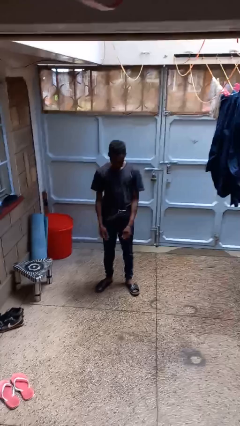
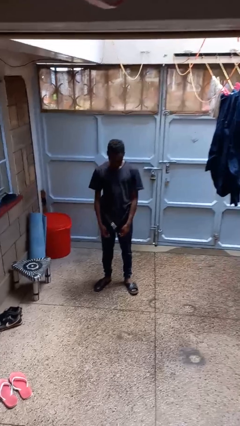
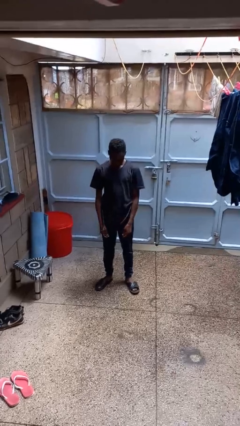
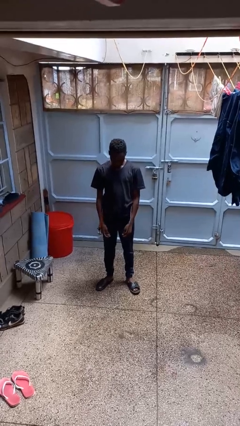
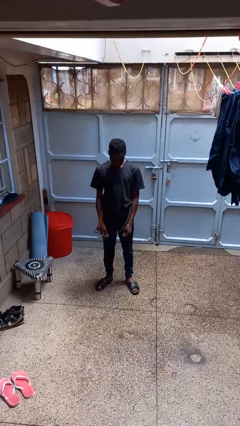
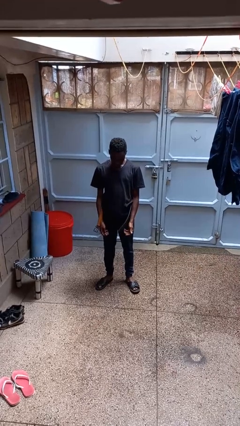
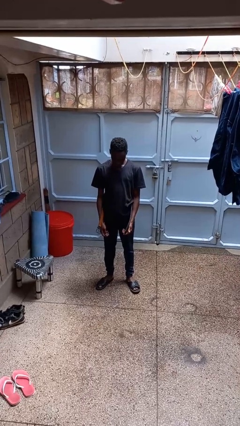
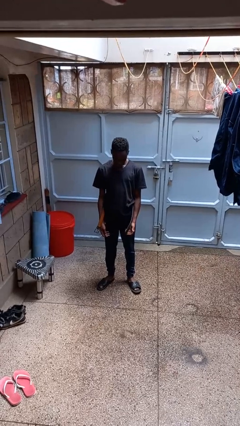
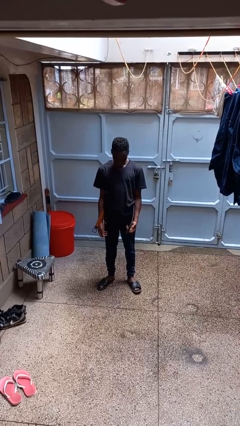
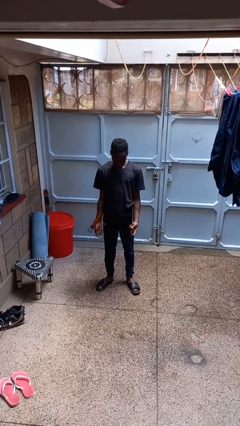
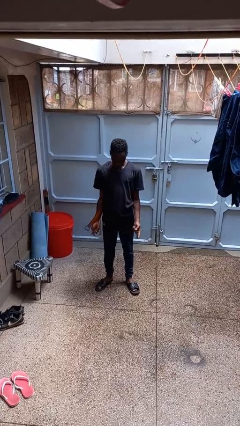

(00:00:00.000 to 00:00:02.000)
person takes off belt

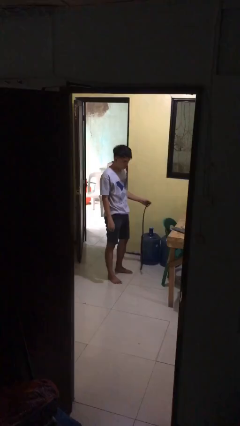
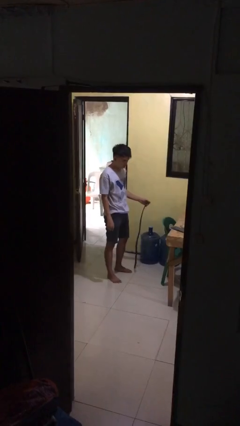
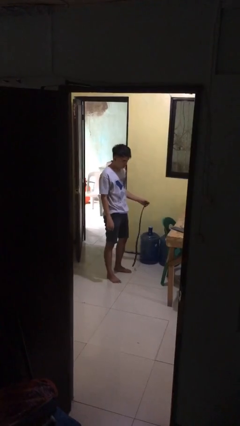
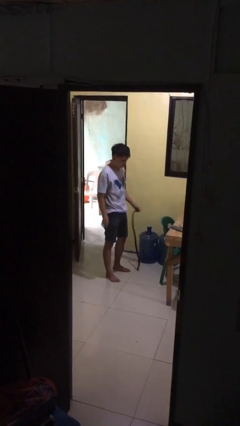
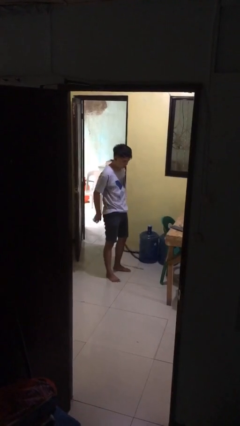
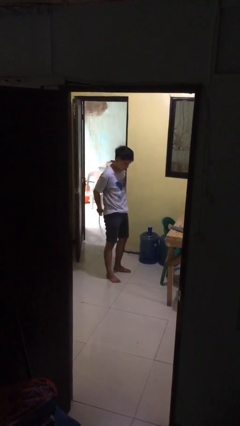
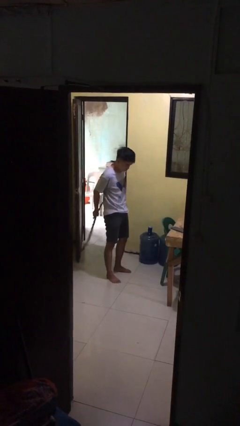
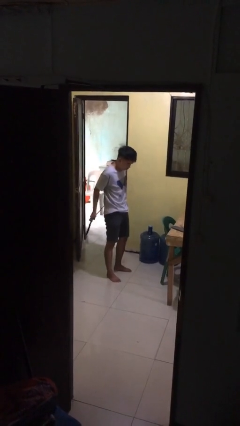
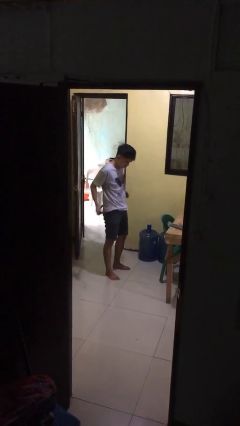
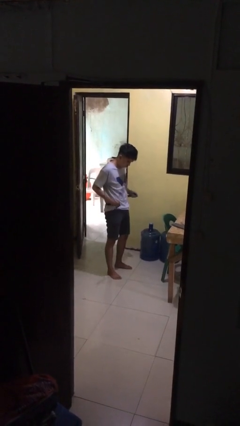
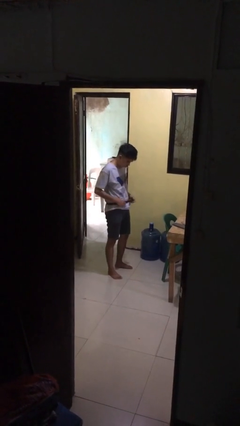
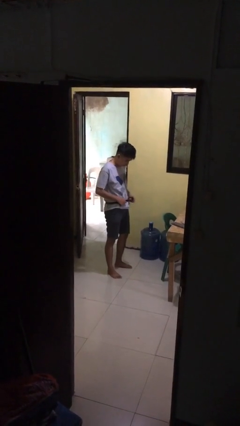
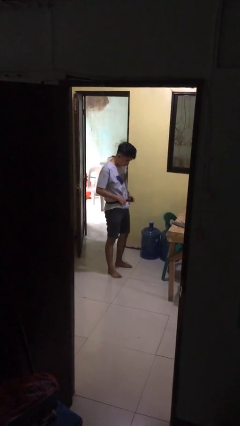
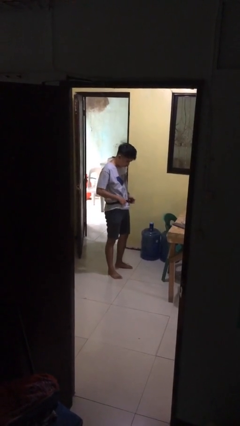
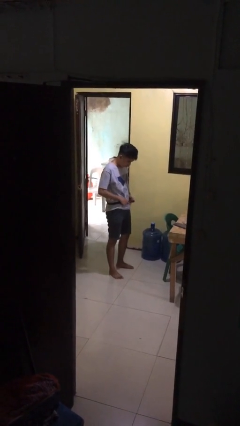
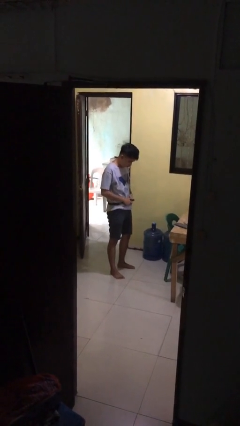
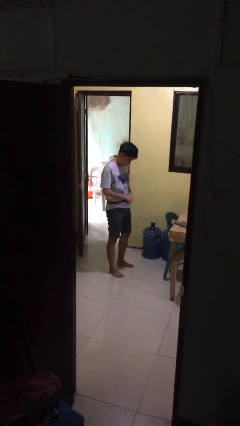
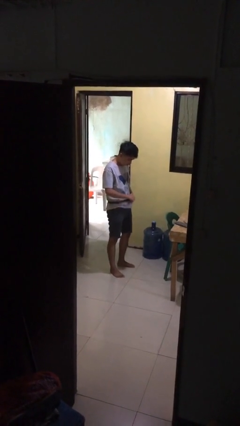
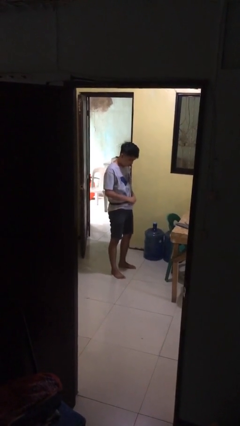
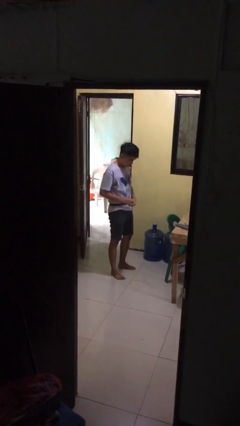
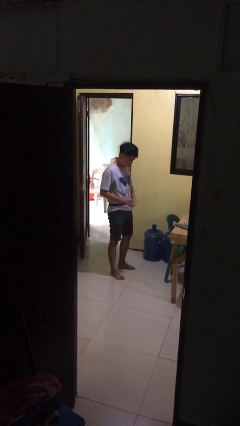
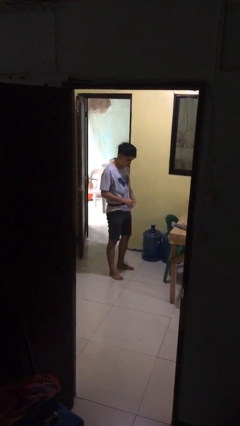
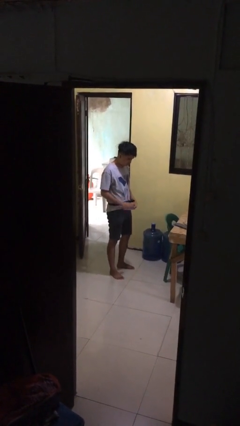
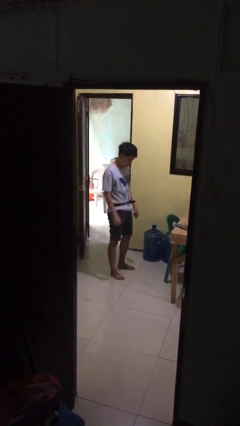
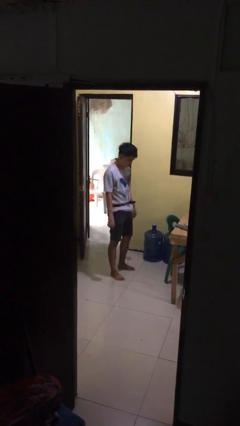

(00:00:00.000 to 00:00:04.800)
person puts on belt

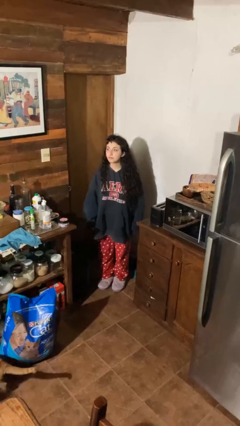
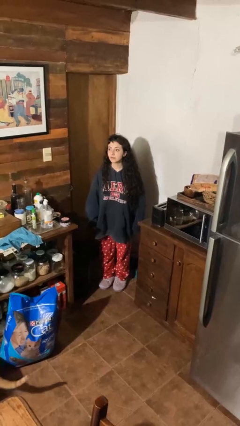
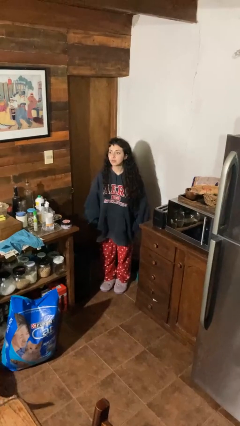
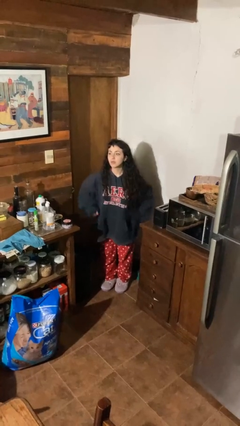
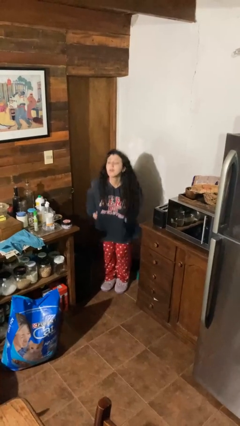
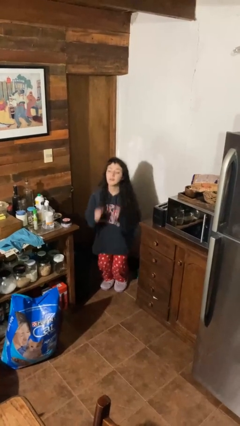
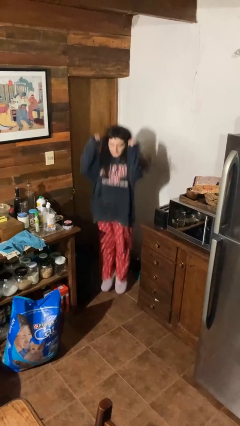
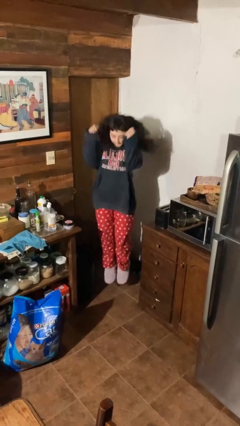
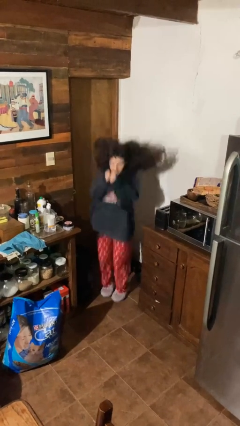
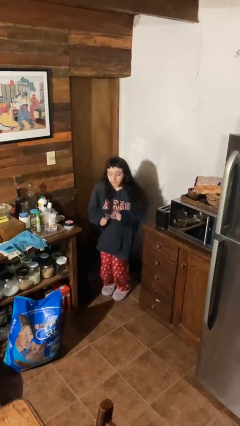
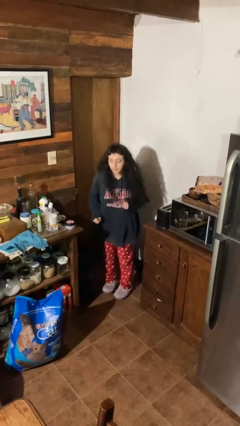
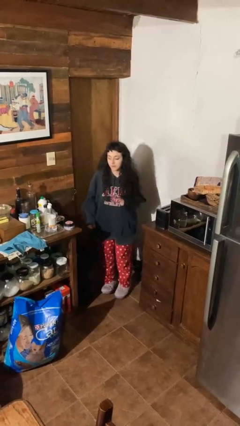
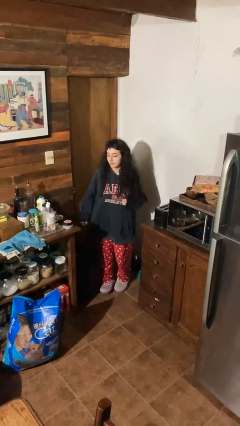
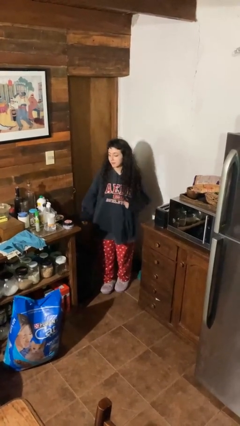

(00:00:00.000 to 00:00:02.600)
person jumps

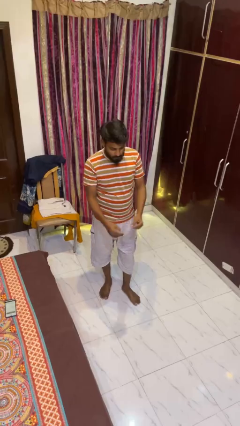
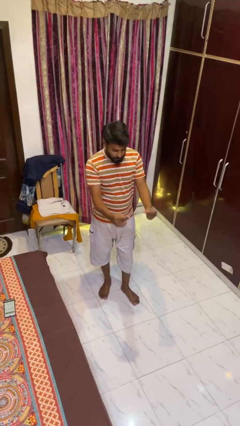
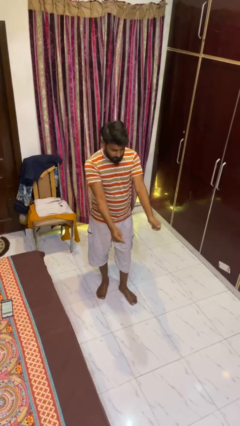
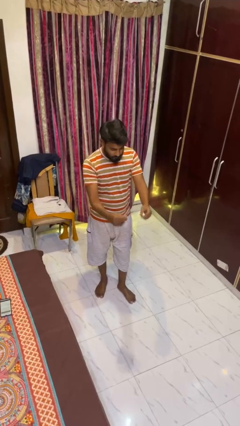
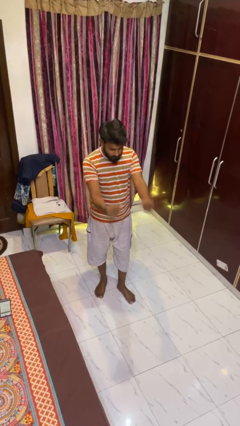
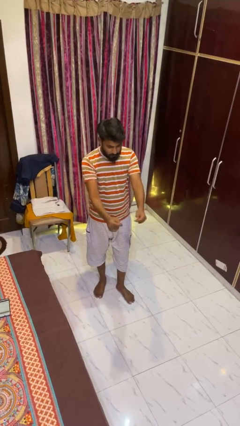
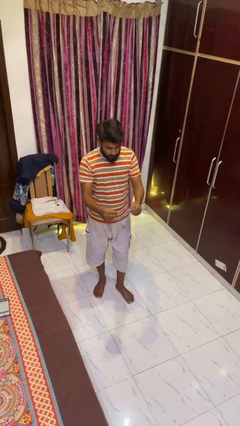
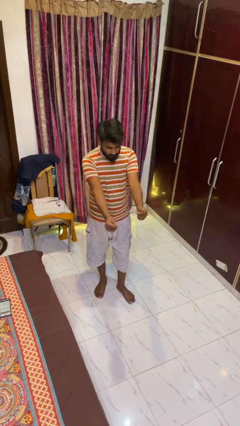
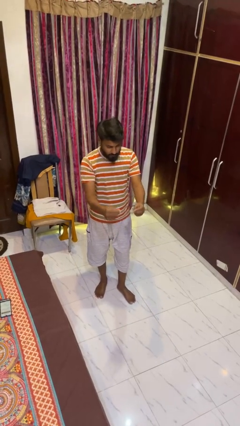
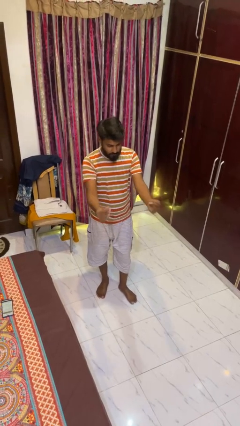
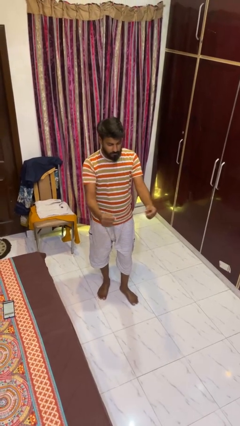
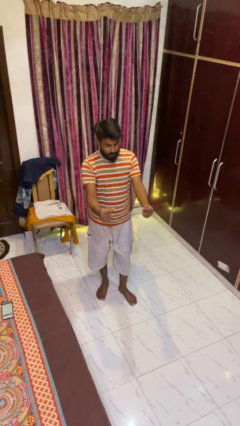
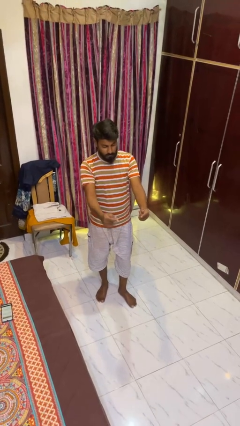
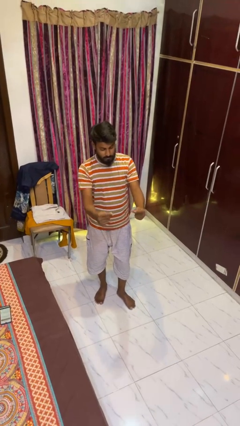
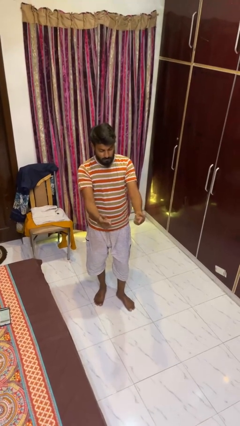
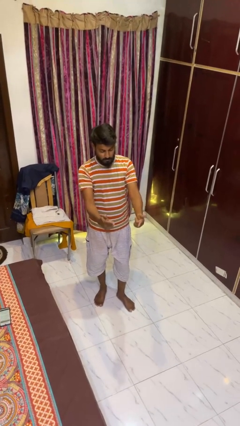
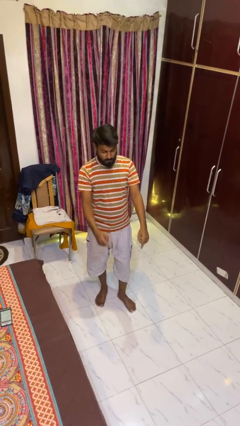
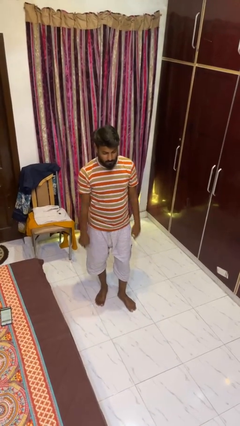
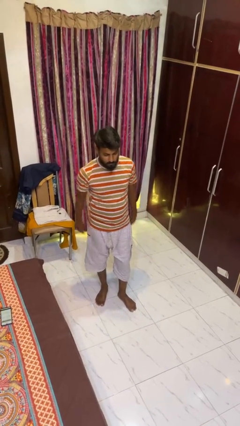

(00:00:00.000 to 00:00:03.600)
person snaps fingers

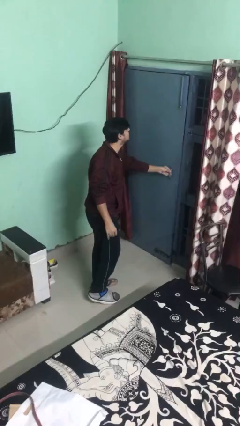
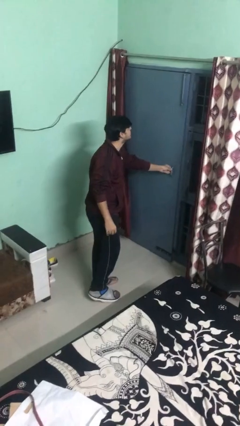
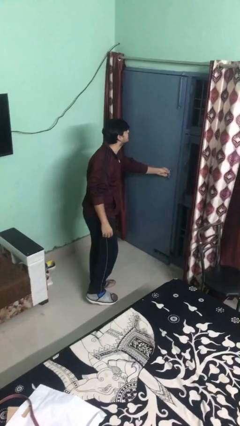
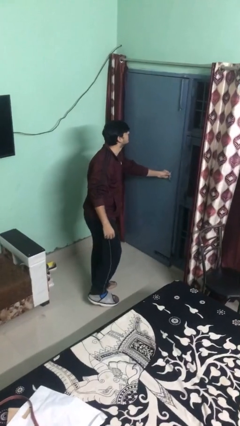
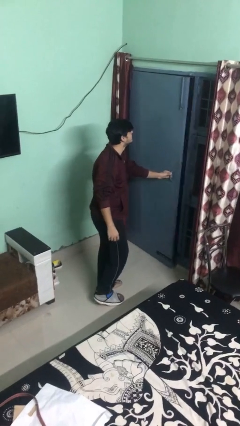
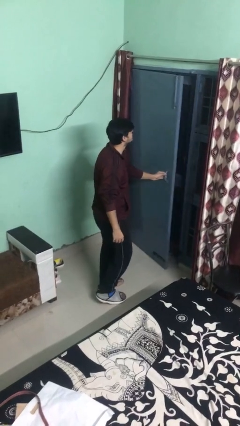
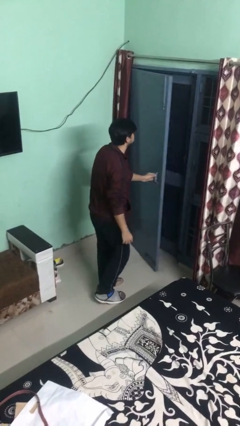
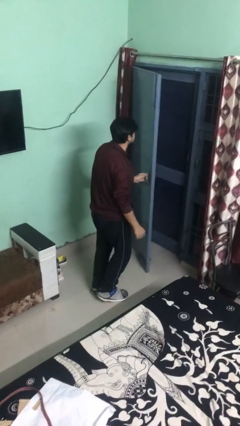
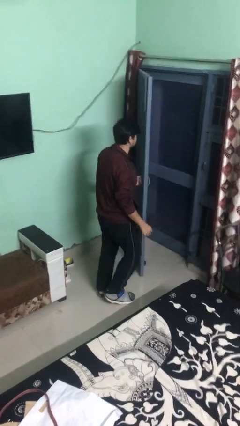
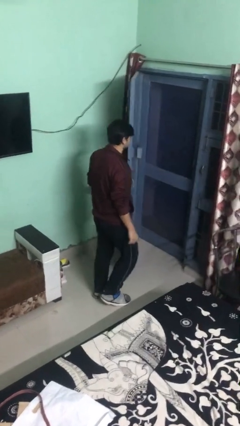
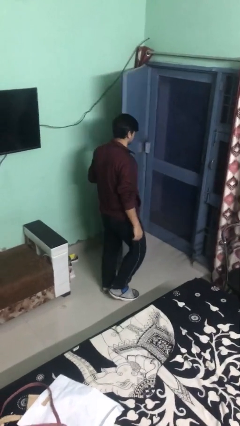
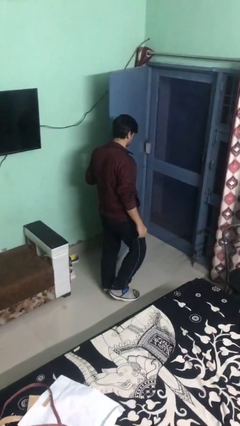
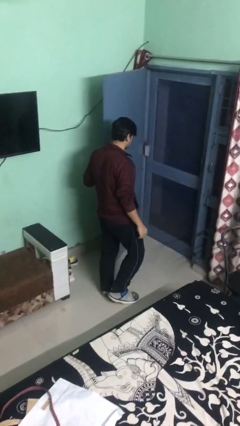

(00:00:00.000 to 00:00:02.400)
person opens facility door

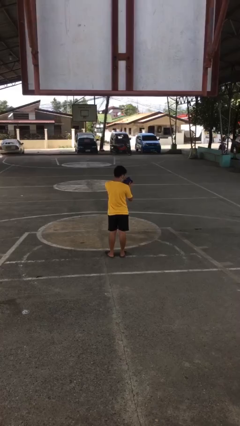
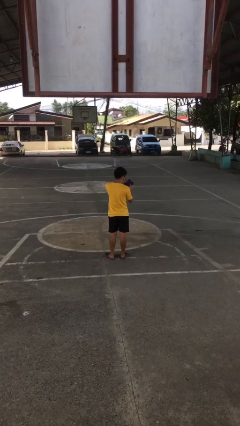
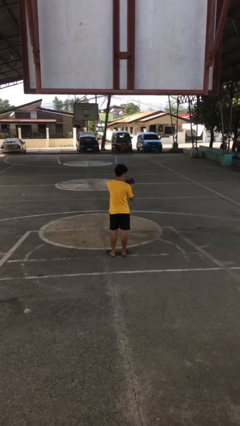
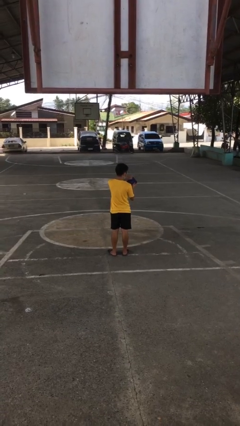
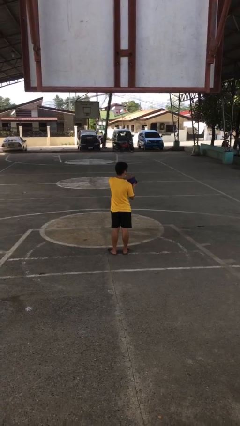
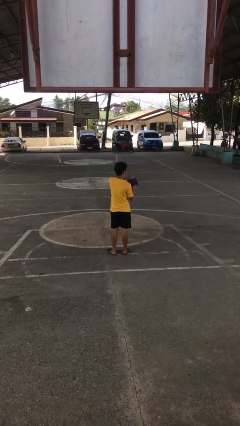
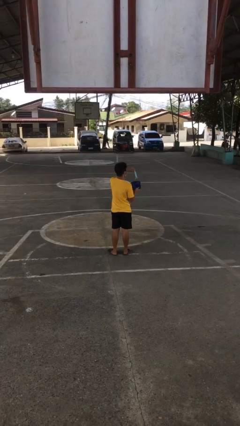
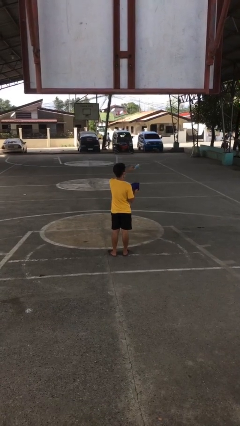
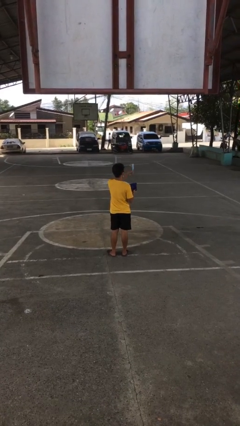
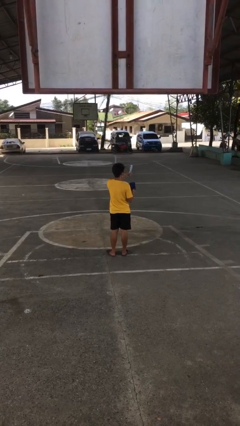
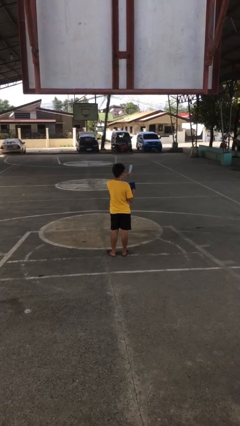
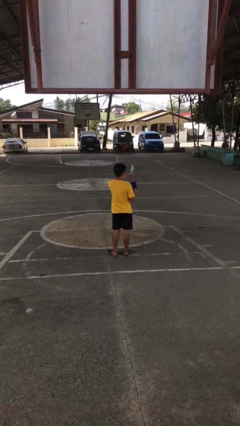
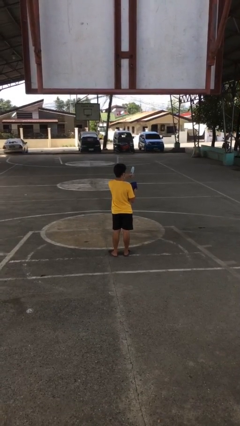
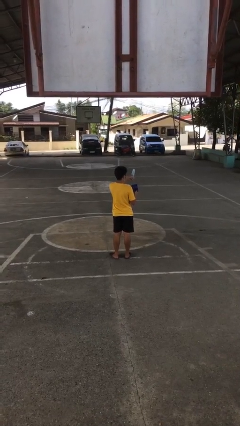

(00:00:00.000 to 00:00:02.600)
person takes object from purse
